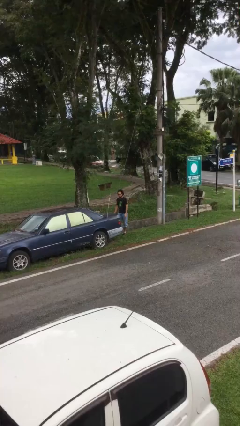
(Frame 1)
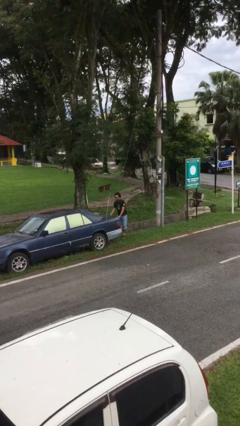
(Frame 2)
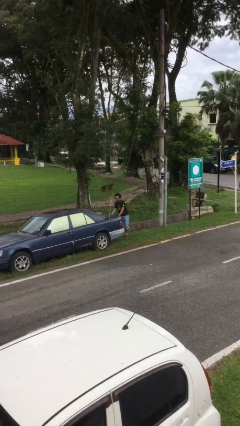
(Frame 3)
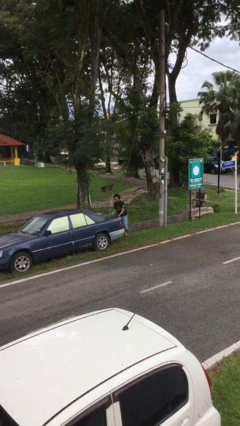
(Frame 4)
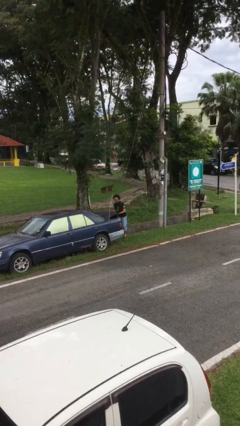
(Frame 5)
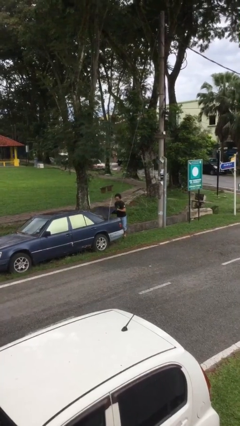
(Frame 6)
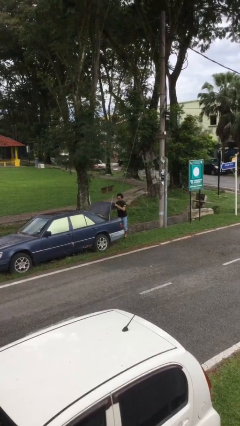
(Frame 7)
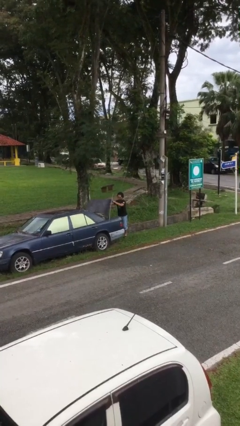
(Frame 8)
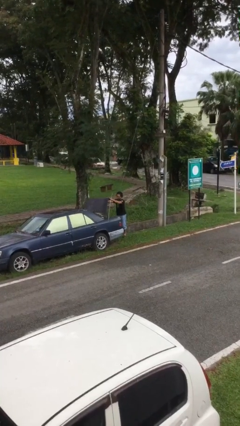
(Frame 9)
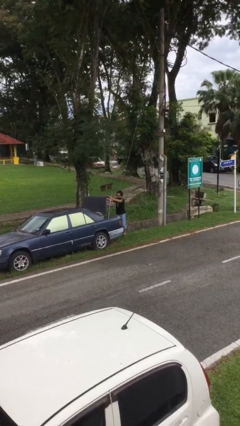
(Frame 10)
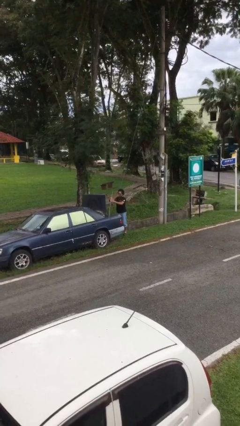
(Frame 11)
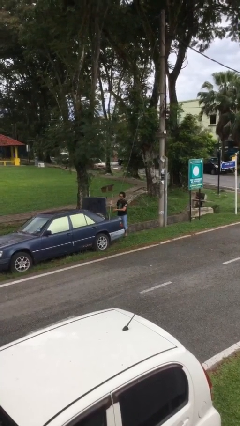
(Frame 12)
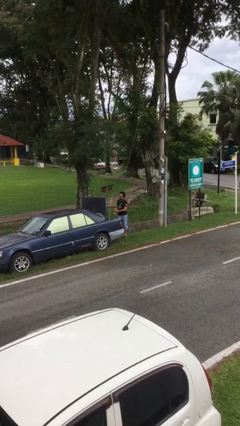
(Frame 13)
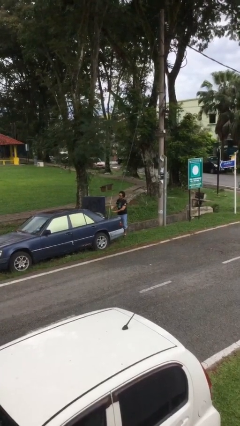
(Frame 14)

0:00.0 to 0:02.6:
person opens car trunk

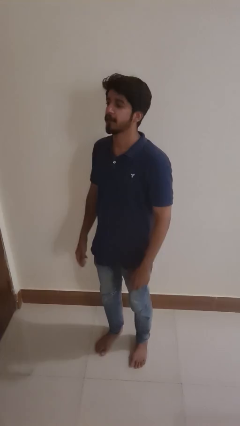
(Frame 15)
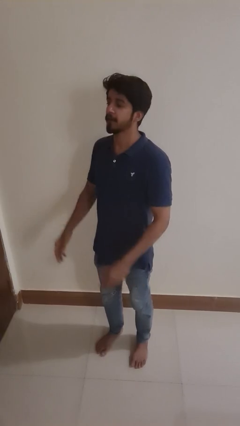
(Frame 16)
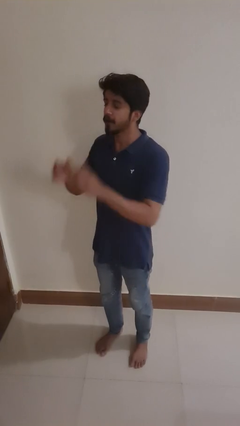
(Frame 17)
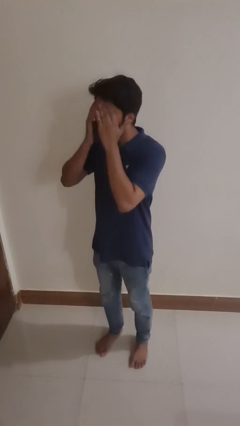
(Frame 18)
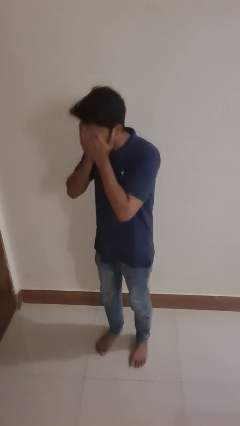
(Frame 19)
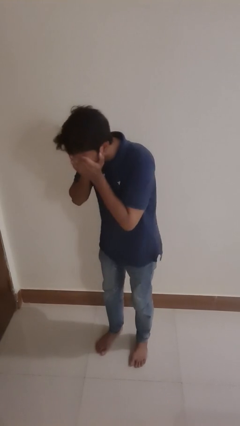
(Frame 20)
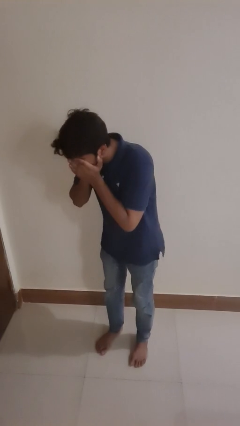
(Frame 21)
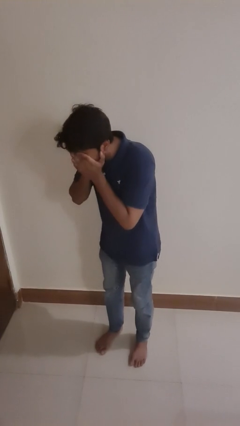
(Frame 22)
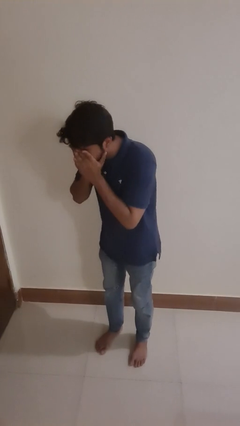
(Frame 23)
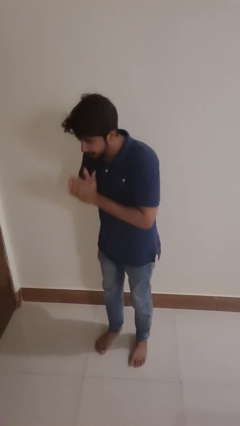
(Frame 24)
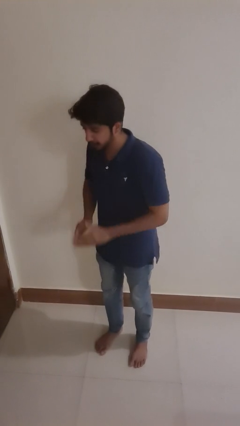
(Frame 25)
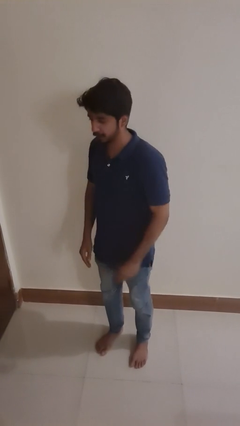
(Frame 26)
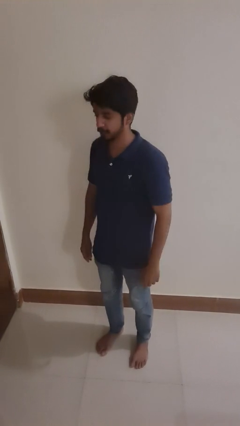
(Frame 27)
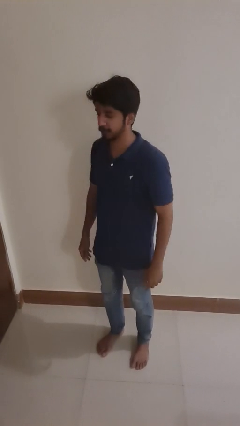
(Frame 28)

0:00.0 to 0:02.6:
person sneezes into hand

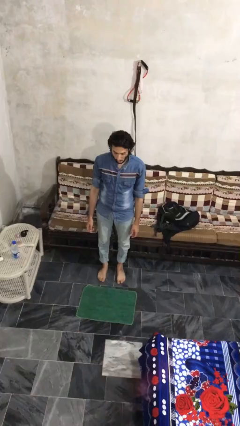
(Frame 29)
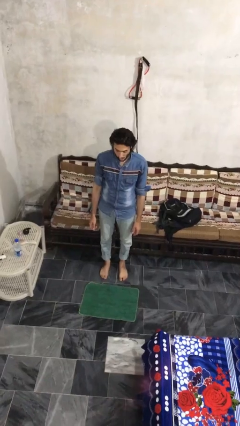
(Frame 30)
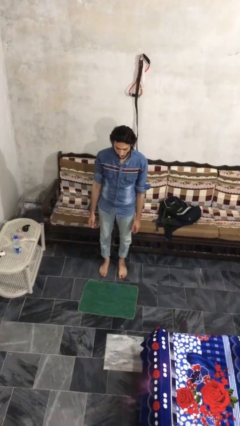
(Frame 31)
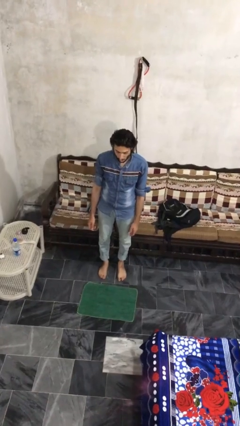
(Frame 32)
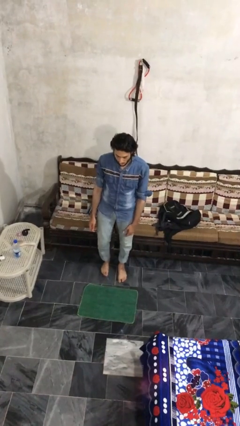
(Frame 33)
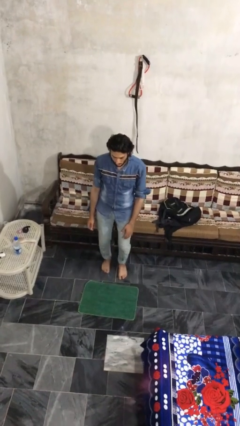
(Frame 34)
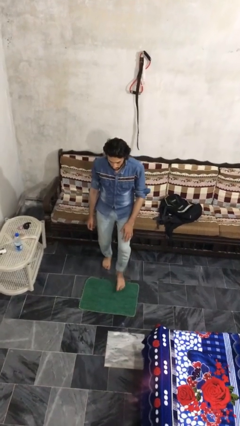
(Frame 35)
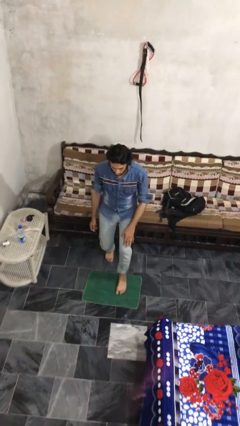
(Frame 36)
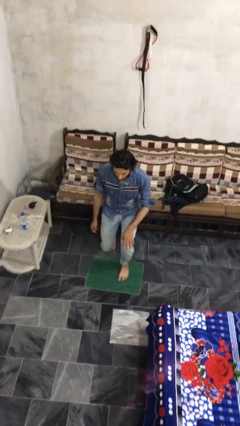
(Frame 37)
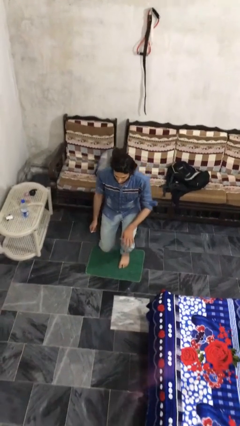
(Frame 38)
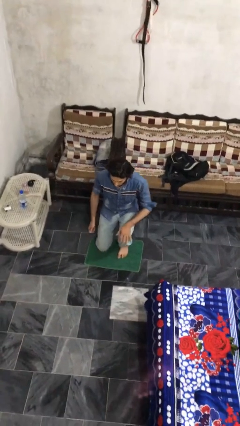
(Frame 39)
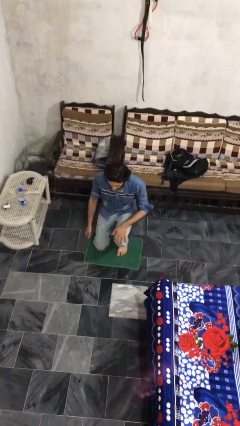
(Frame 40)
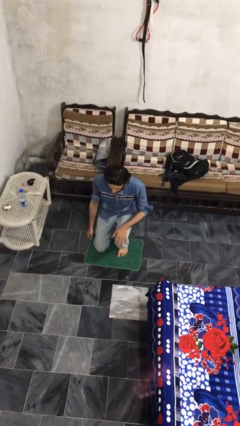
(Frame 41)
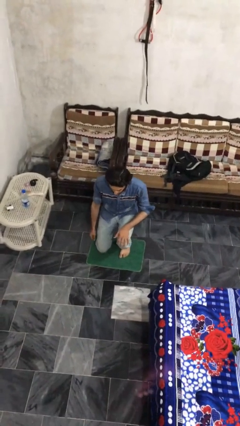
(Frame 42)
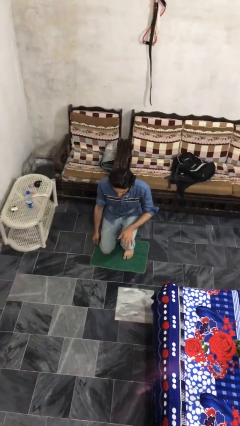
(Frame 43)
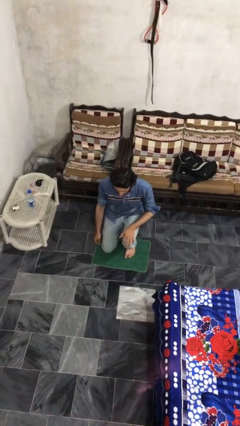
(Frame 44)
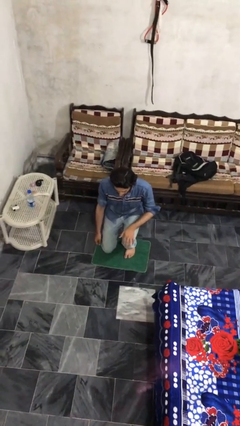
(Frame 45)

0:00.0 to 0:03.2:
person kneels

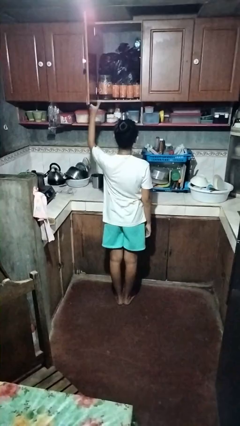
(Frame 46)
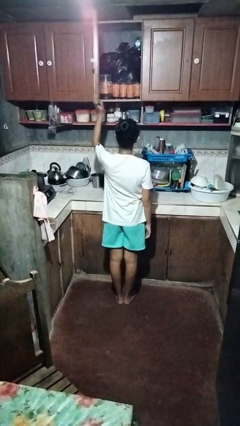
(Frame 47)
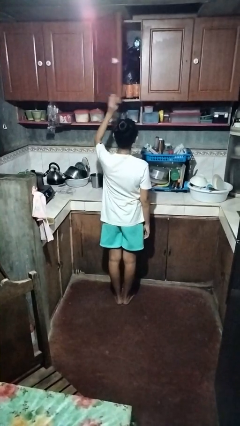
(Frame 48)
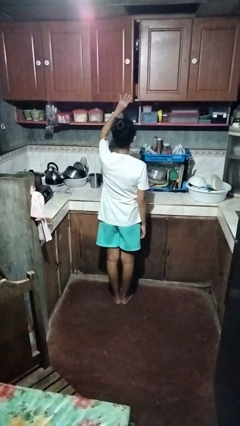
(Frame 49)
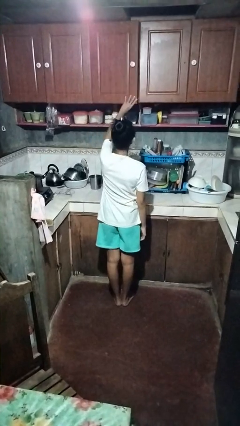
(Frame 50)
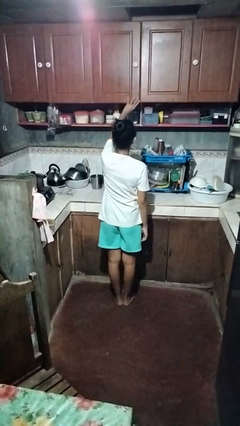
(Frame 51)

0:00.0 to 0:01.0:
person closes cabinet

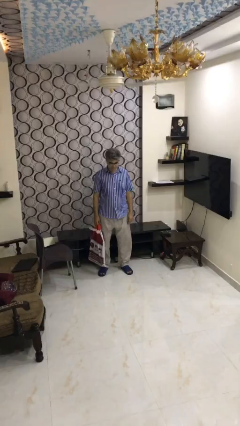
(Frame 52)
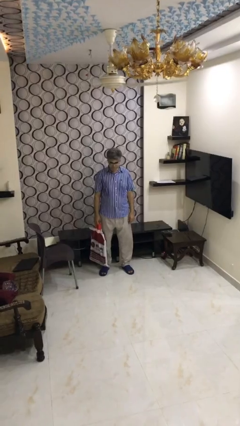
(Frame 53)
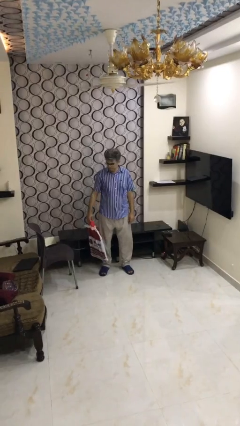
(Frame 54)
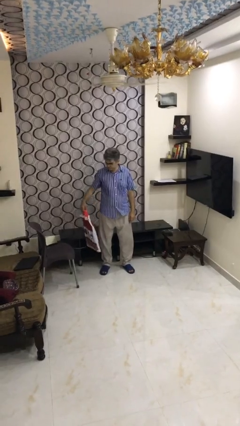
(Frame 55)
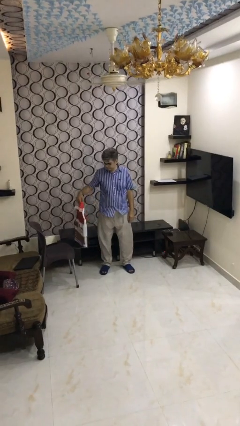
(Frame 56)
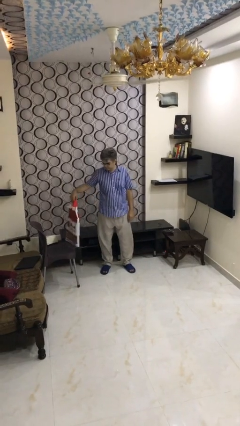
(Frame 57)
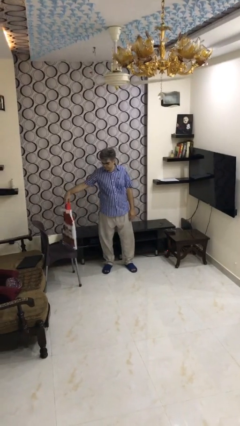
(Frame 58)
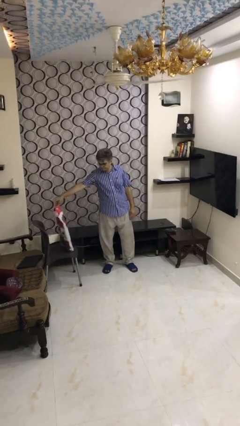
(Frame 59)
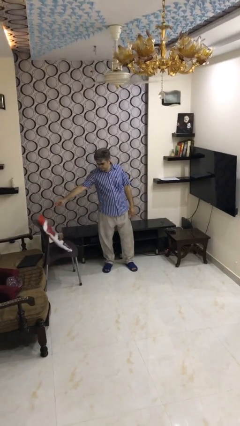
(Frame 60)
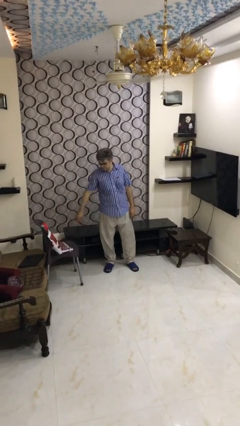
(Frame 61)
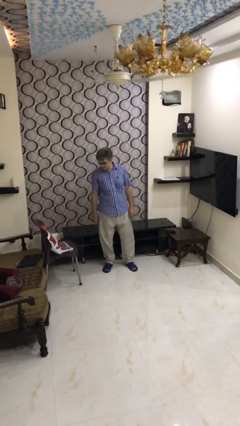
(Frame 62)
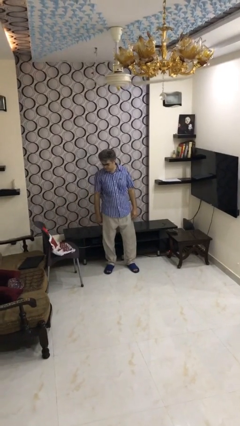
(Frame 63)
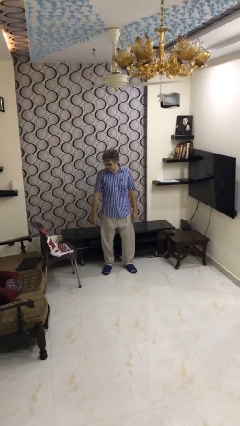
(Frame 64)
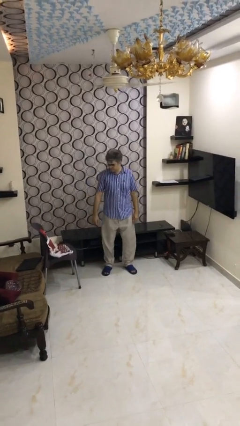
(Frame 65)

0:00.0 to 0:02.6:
person puts down object on table

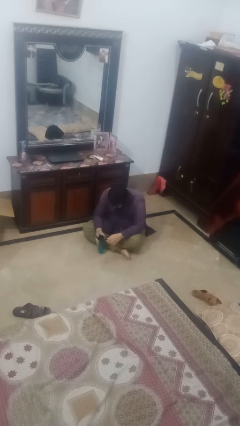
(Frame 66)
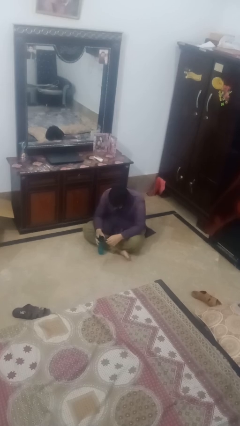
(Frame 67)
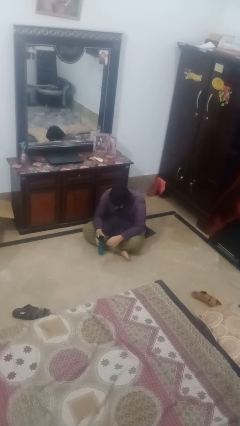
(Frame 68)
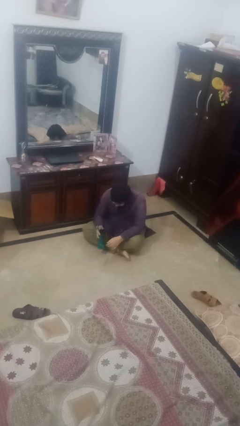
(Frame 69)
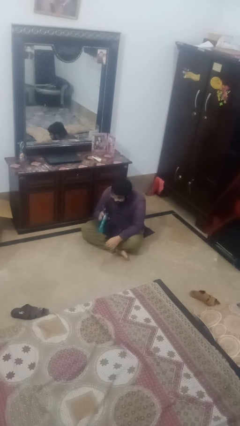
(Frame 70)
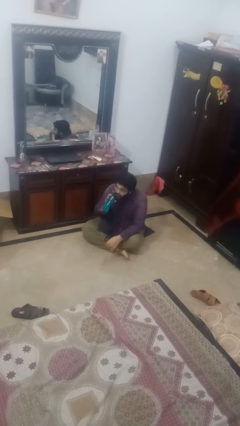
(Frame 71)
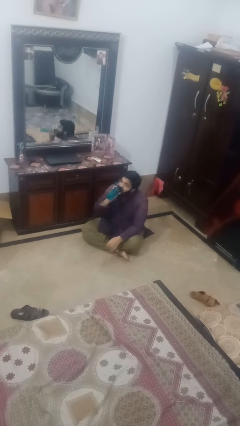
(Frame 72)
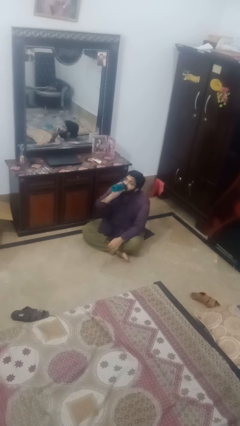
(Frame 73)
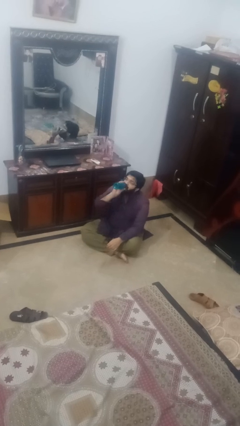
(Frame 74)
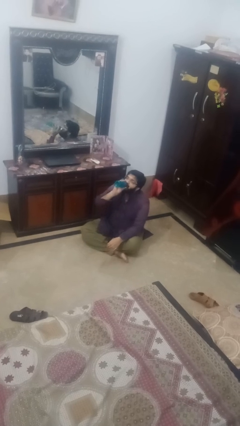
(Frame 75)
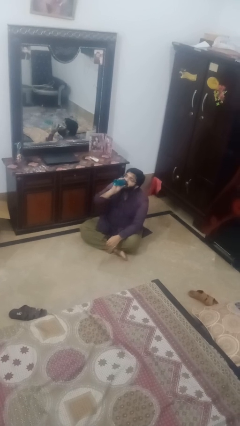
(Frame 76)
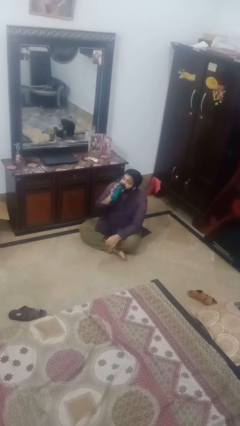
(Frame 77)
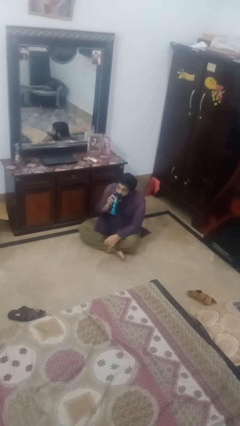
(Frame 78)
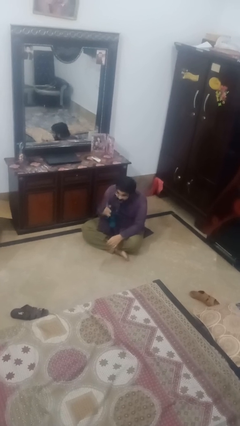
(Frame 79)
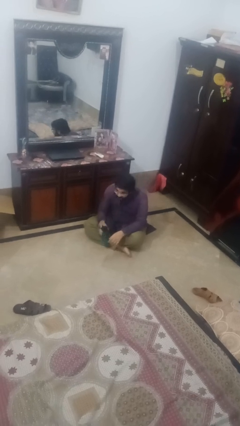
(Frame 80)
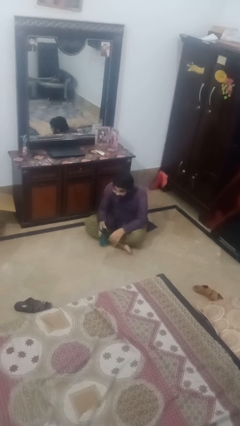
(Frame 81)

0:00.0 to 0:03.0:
person drinks from bottle

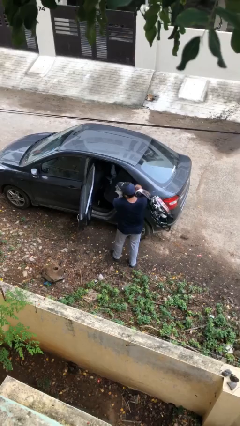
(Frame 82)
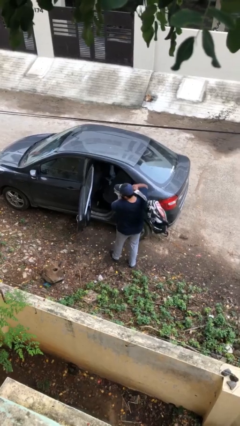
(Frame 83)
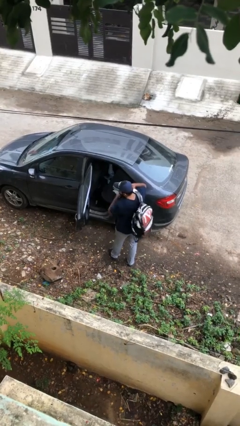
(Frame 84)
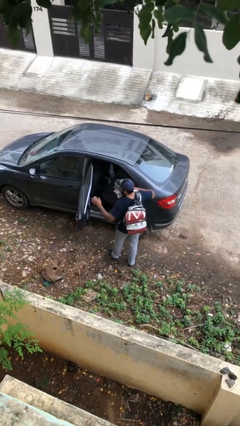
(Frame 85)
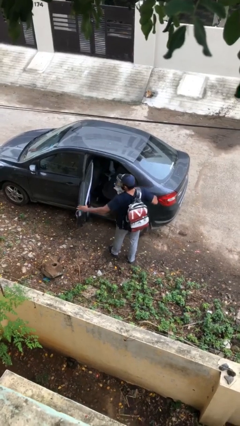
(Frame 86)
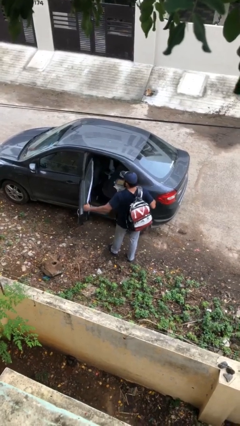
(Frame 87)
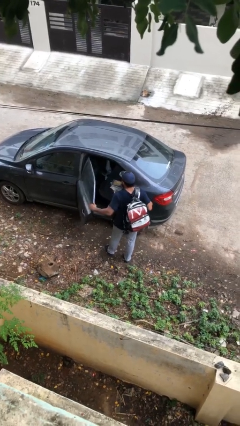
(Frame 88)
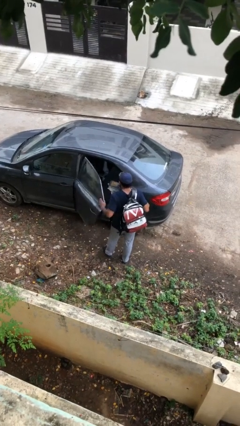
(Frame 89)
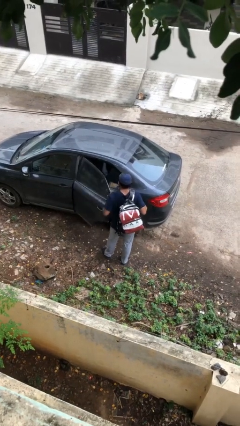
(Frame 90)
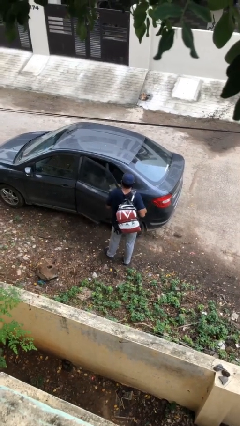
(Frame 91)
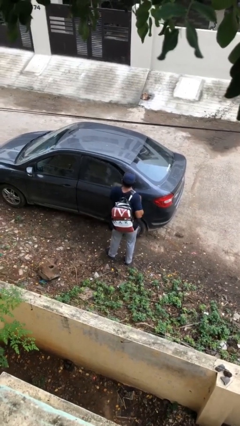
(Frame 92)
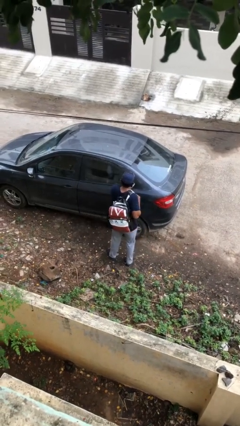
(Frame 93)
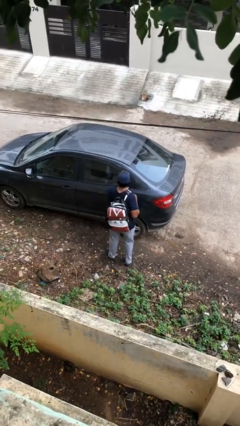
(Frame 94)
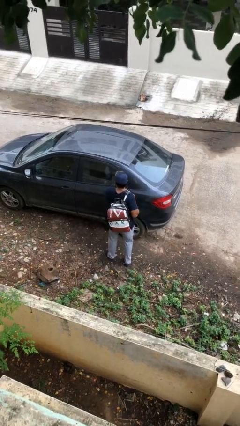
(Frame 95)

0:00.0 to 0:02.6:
person closes car door
